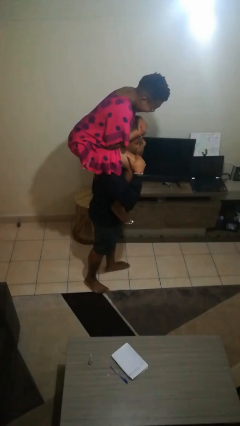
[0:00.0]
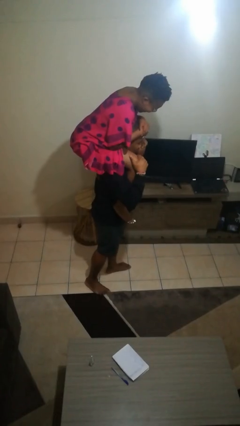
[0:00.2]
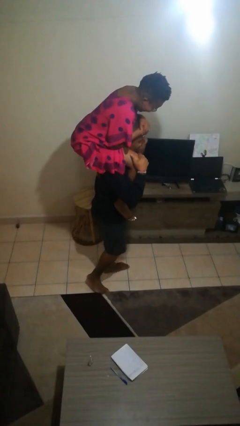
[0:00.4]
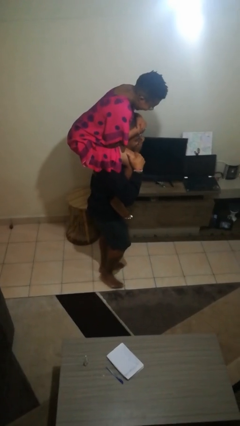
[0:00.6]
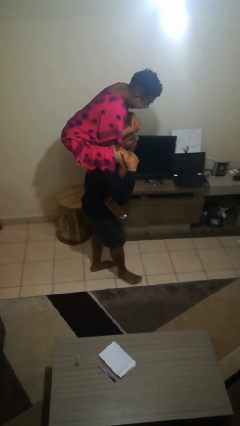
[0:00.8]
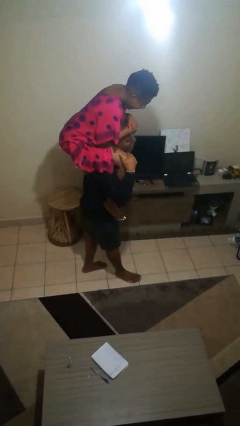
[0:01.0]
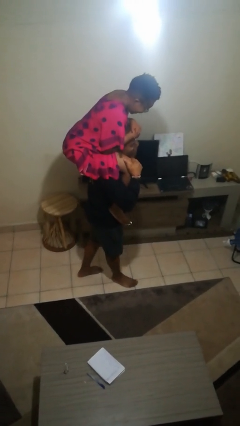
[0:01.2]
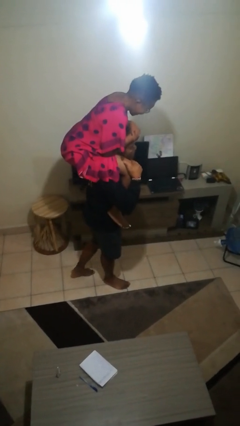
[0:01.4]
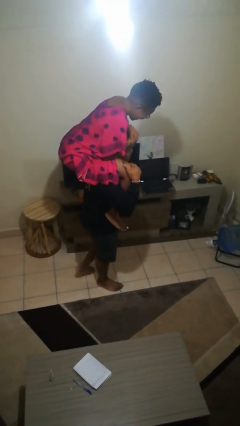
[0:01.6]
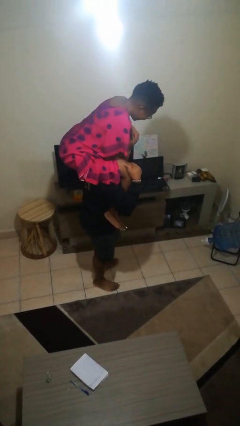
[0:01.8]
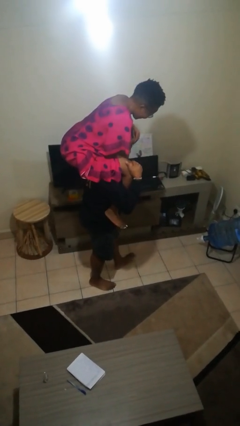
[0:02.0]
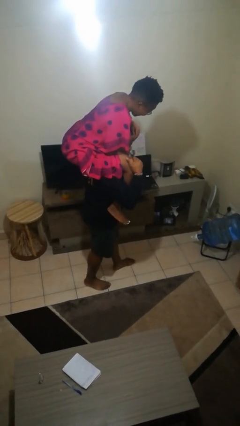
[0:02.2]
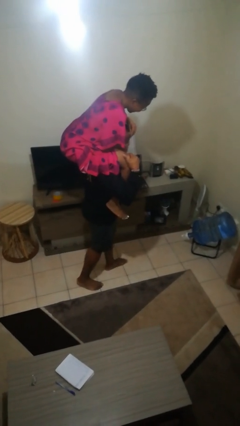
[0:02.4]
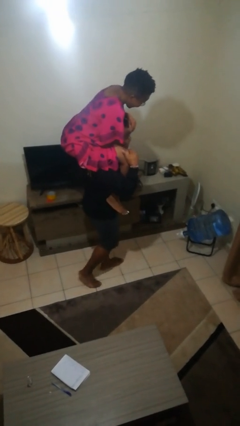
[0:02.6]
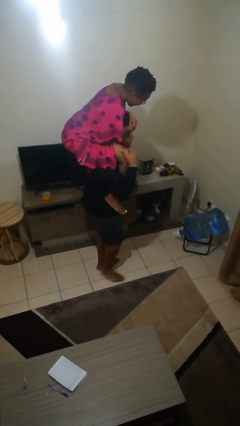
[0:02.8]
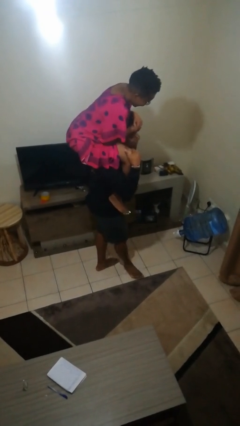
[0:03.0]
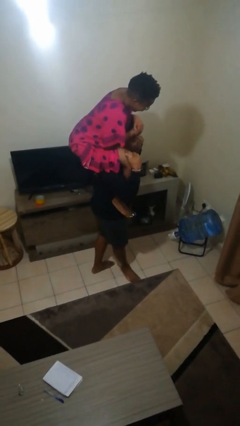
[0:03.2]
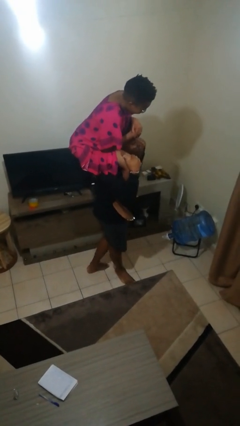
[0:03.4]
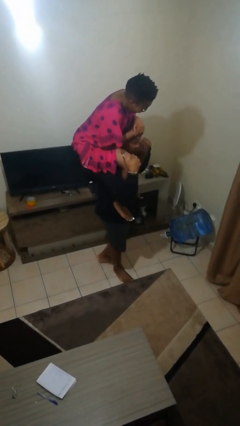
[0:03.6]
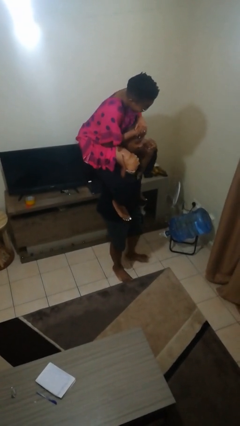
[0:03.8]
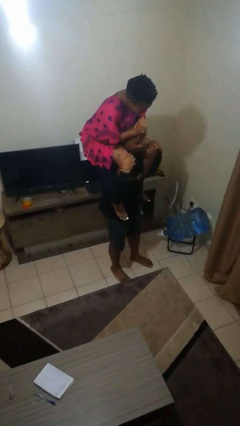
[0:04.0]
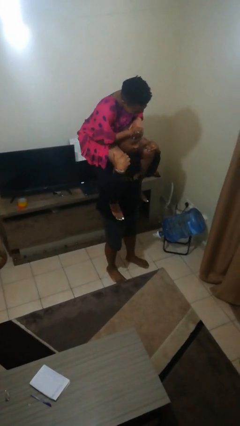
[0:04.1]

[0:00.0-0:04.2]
person carries person on shoulders

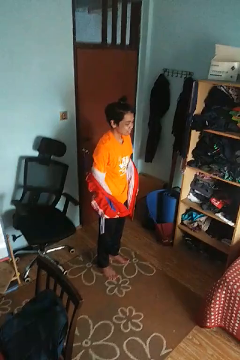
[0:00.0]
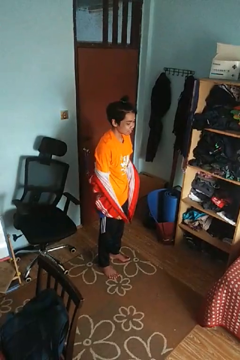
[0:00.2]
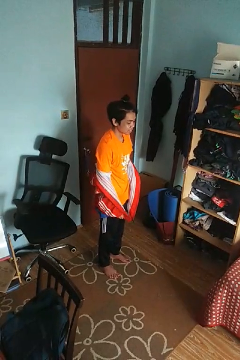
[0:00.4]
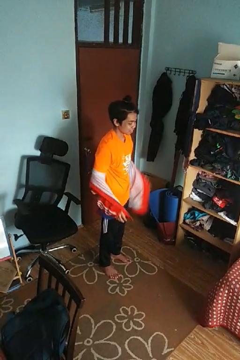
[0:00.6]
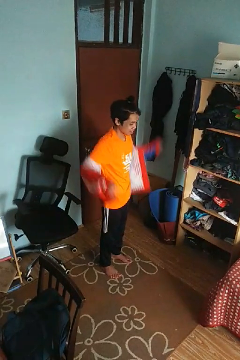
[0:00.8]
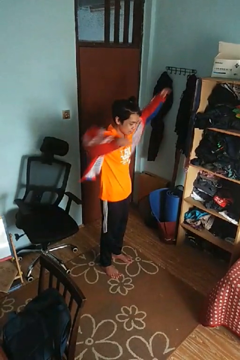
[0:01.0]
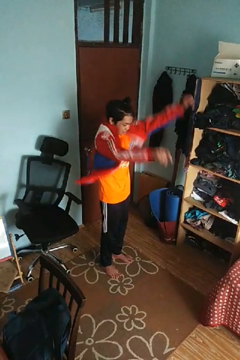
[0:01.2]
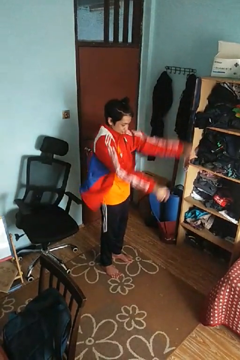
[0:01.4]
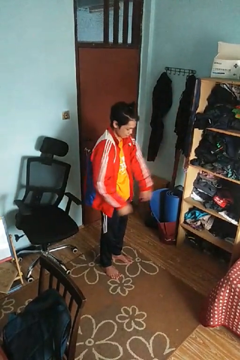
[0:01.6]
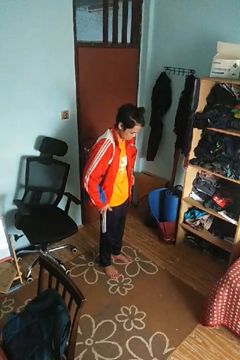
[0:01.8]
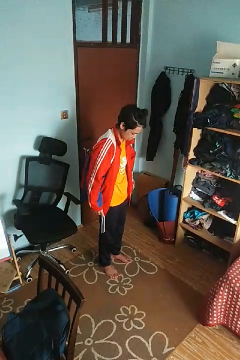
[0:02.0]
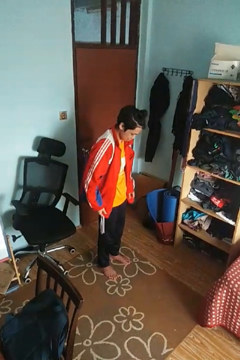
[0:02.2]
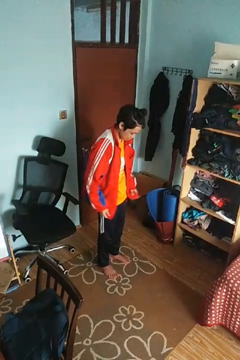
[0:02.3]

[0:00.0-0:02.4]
person puts on jacket

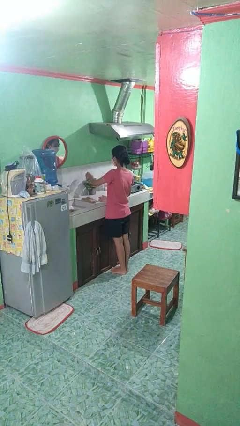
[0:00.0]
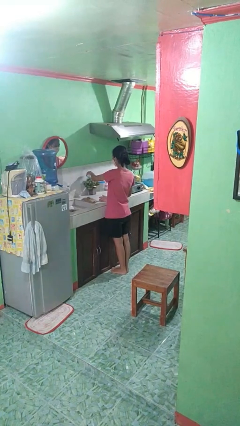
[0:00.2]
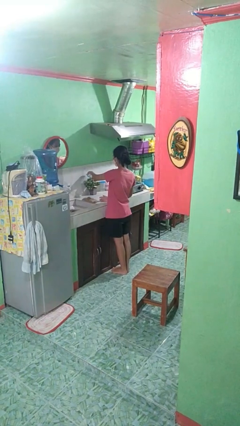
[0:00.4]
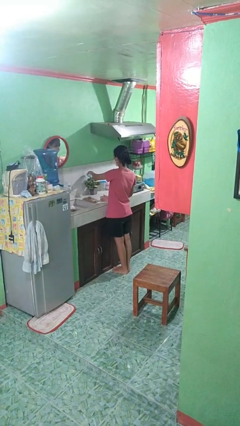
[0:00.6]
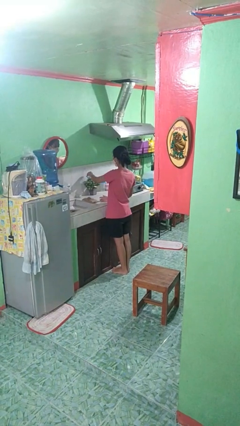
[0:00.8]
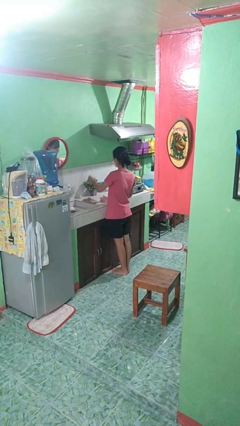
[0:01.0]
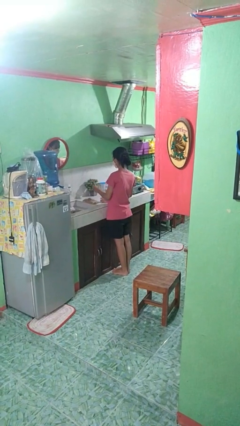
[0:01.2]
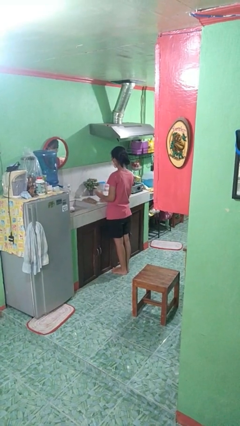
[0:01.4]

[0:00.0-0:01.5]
person waters houseplant

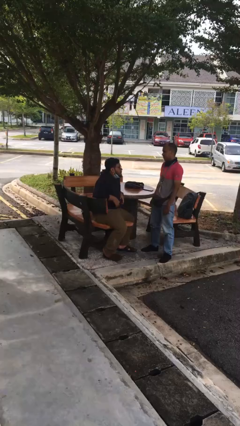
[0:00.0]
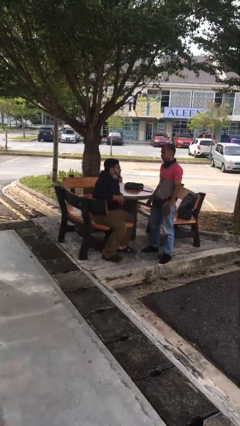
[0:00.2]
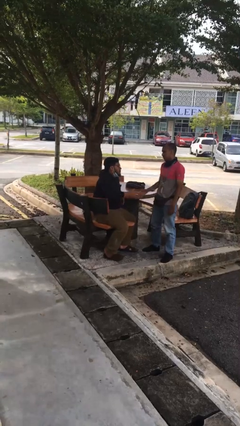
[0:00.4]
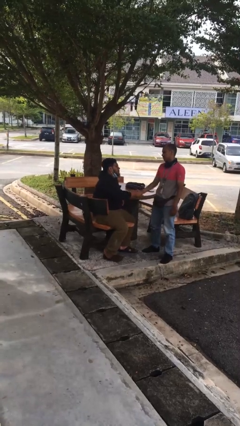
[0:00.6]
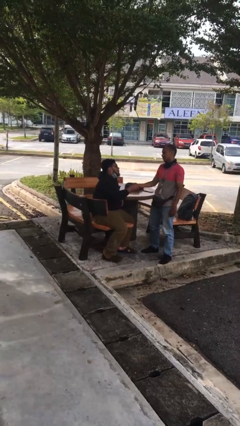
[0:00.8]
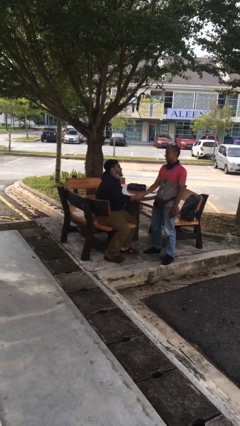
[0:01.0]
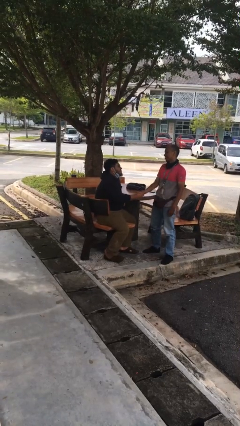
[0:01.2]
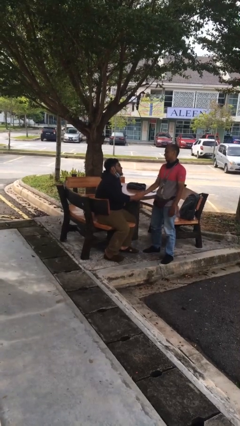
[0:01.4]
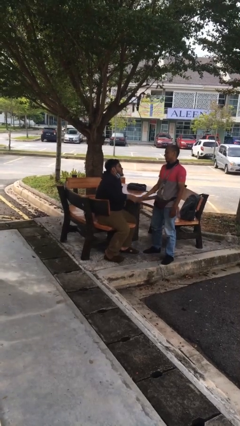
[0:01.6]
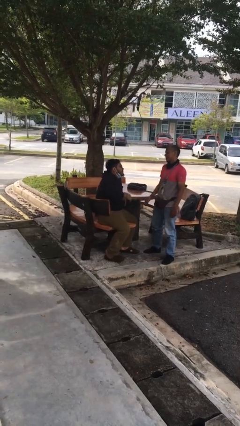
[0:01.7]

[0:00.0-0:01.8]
person shakes hand

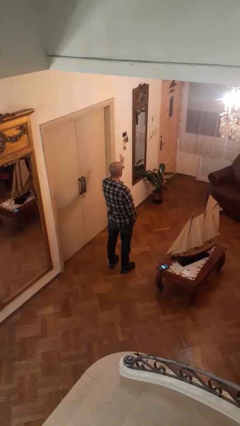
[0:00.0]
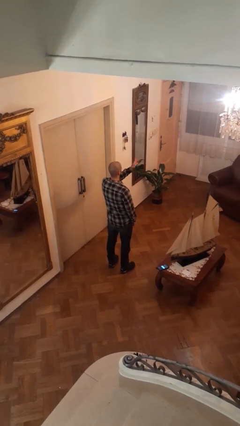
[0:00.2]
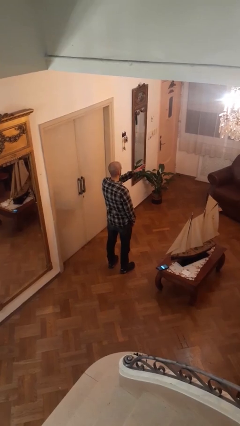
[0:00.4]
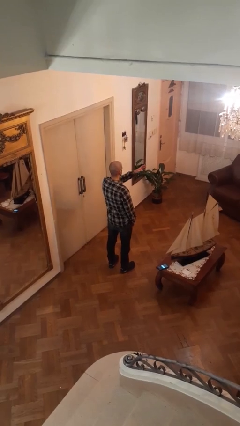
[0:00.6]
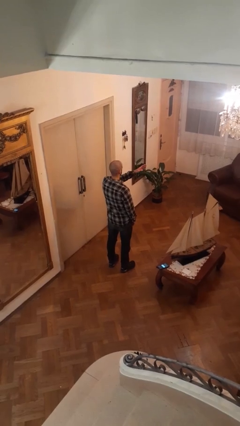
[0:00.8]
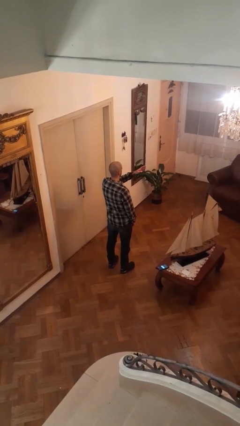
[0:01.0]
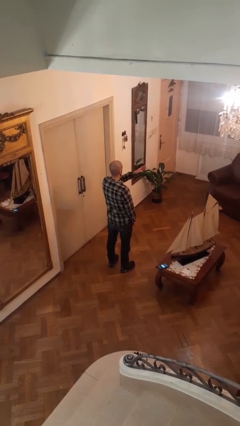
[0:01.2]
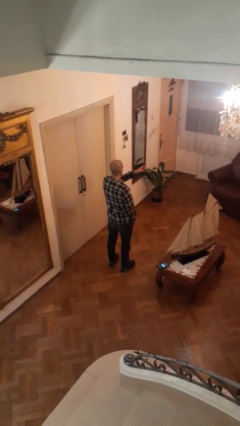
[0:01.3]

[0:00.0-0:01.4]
person gestures swipe right

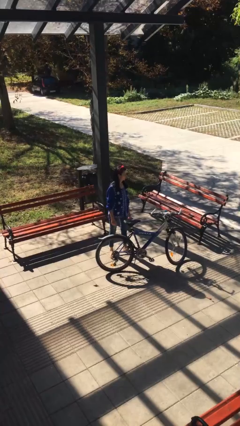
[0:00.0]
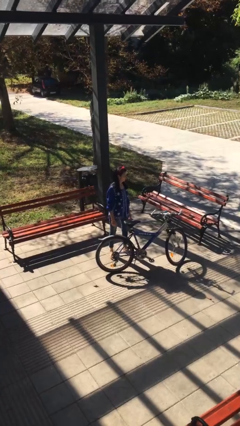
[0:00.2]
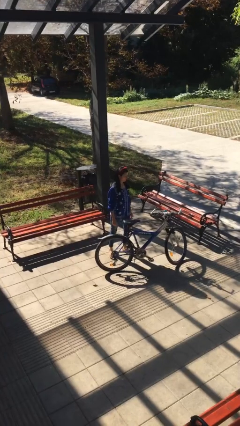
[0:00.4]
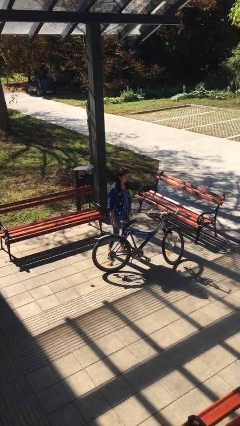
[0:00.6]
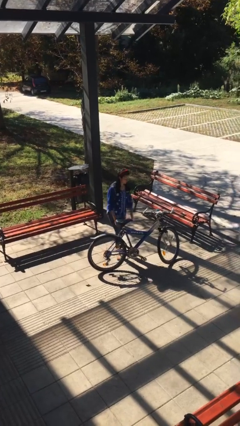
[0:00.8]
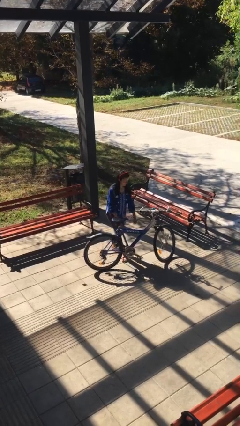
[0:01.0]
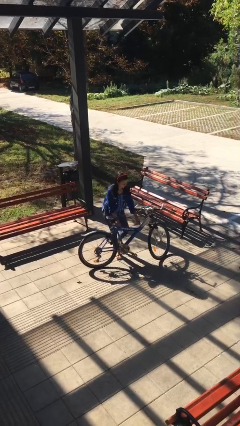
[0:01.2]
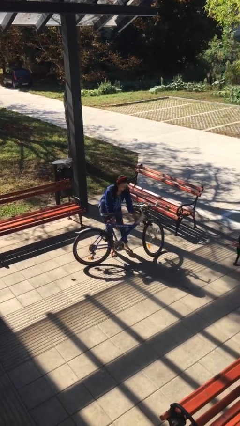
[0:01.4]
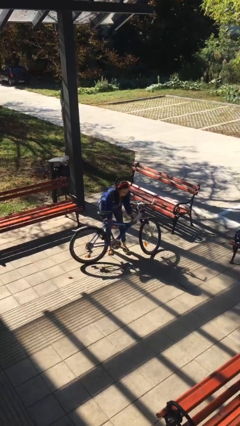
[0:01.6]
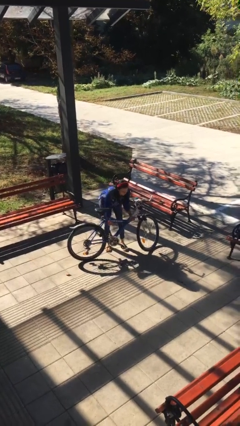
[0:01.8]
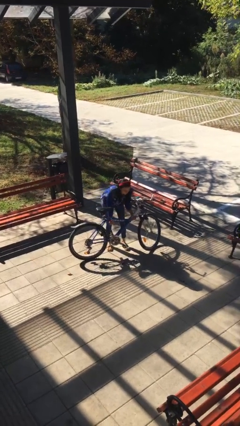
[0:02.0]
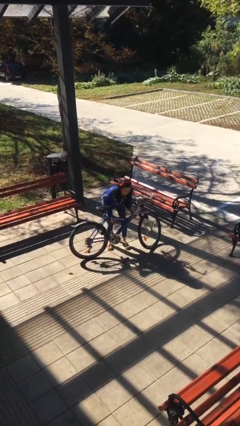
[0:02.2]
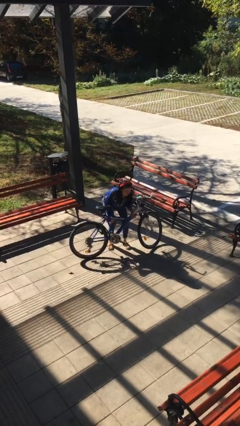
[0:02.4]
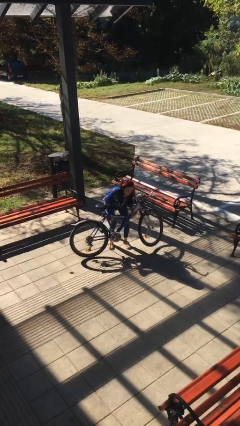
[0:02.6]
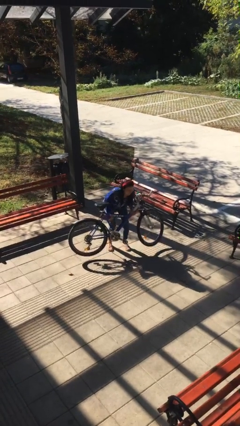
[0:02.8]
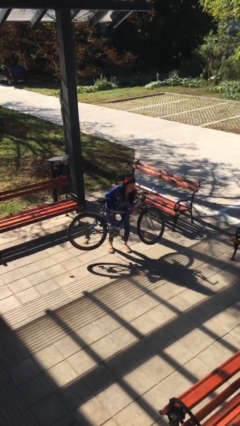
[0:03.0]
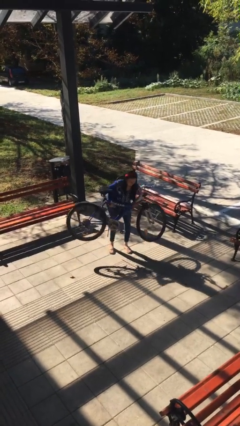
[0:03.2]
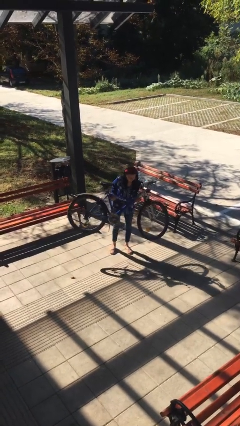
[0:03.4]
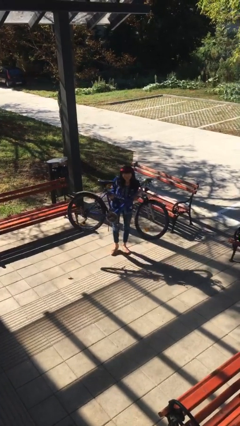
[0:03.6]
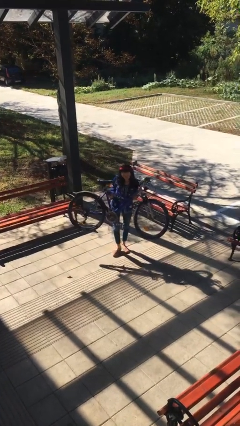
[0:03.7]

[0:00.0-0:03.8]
person picks up object from floor

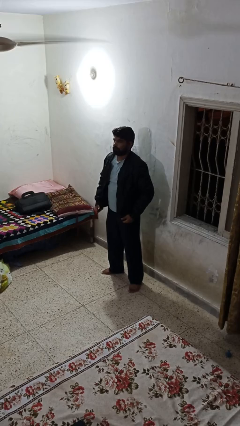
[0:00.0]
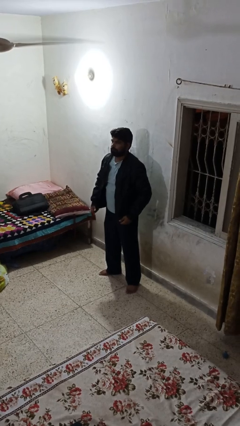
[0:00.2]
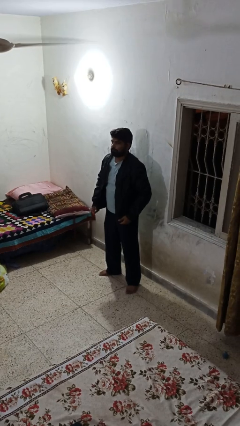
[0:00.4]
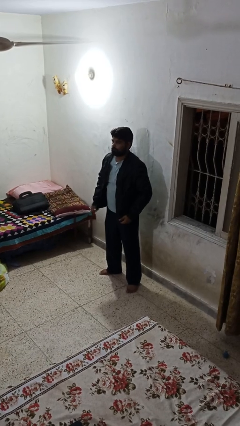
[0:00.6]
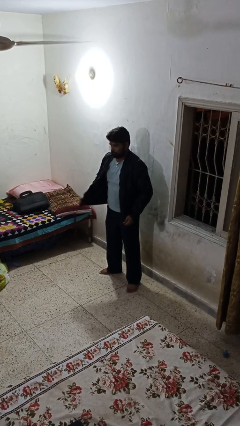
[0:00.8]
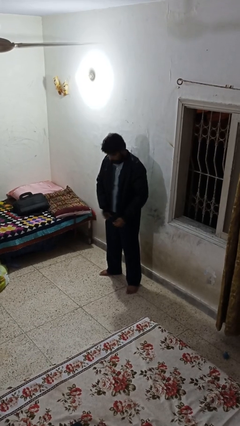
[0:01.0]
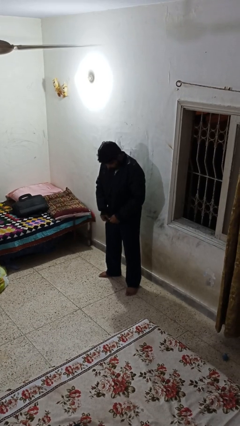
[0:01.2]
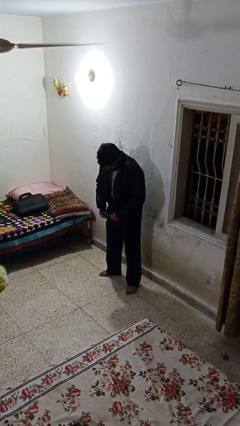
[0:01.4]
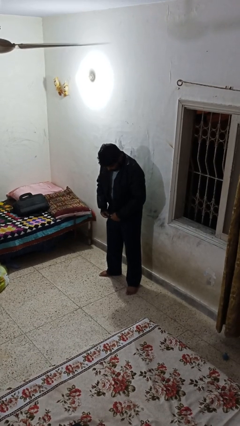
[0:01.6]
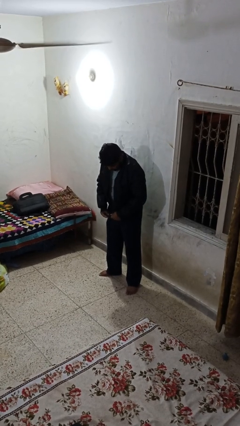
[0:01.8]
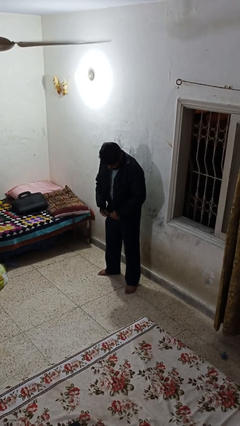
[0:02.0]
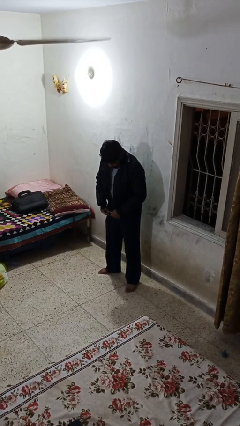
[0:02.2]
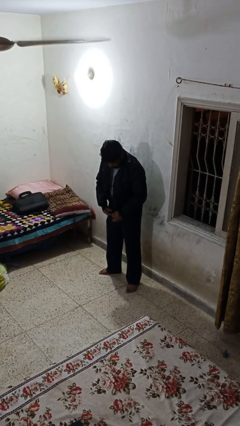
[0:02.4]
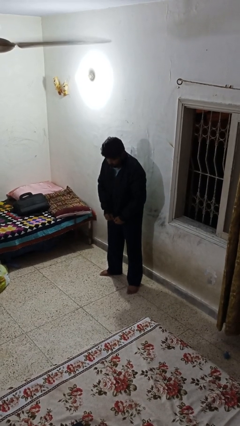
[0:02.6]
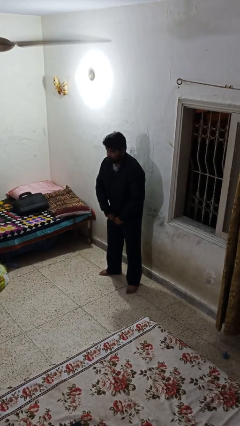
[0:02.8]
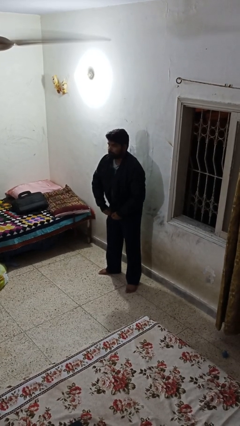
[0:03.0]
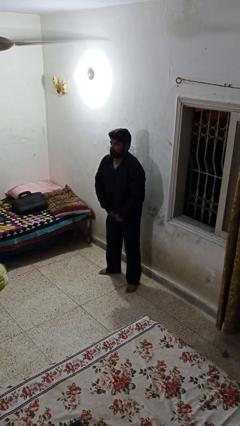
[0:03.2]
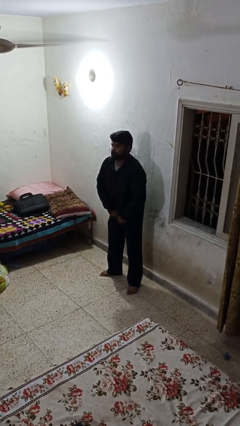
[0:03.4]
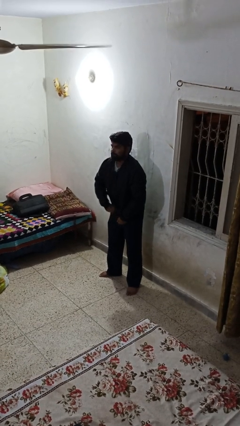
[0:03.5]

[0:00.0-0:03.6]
person zips up jacket
